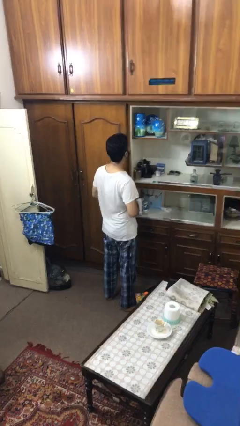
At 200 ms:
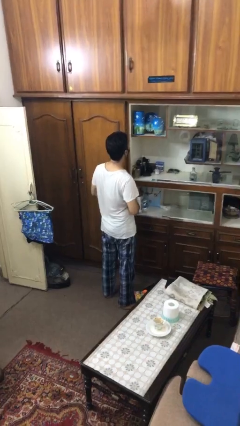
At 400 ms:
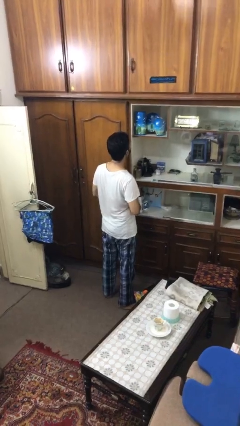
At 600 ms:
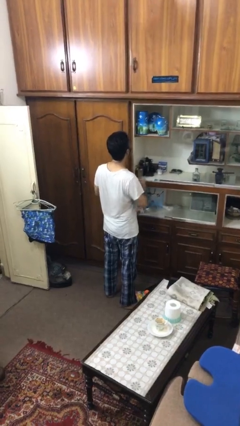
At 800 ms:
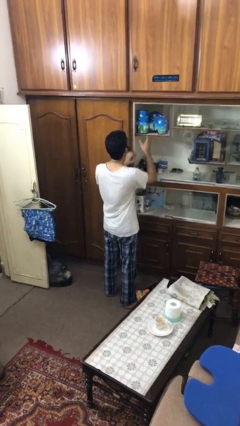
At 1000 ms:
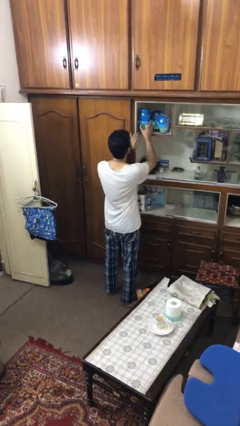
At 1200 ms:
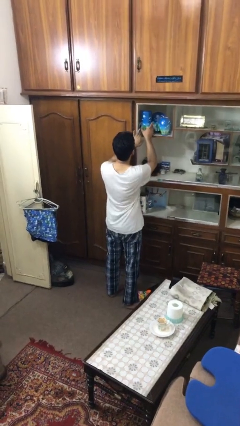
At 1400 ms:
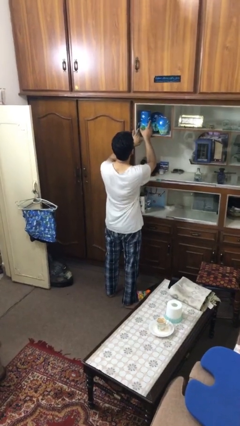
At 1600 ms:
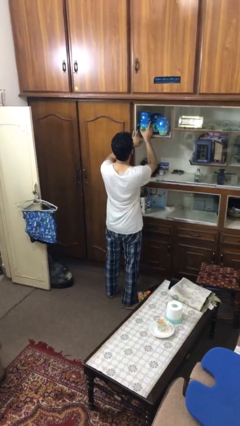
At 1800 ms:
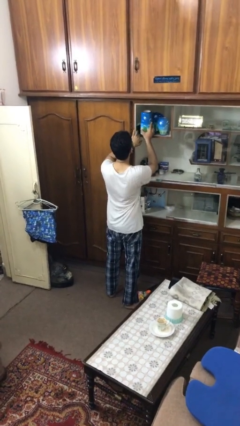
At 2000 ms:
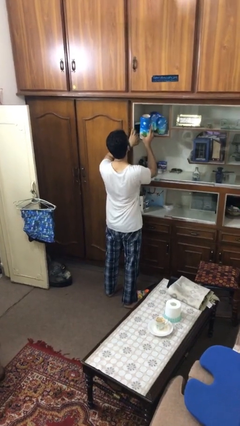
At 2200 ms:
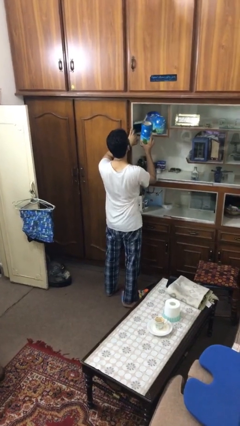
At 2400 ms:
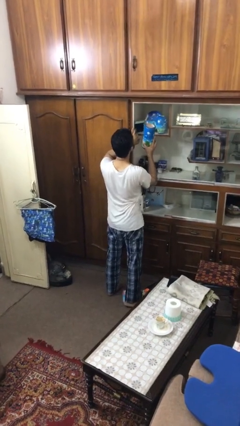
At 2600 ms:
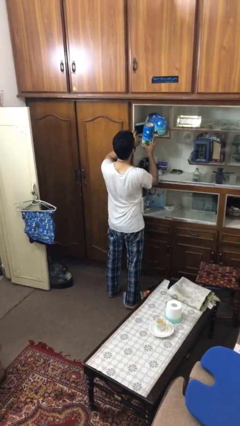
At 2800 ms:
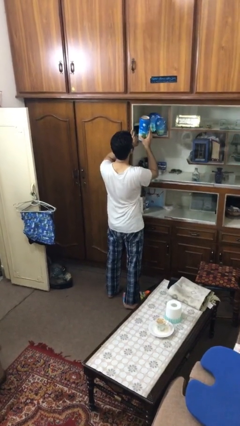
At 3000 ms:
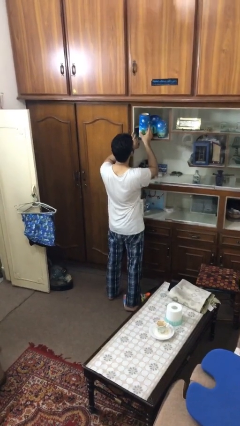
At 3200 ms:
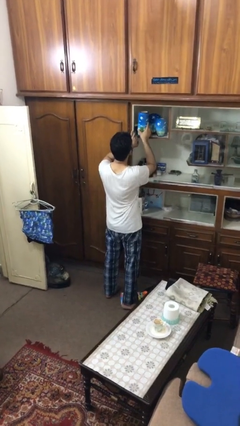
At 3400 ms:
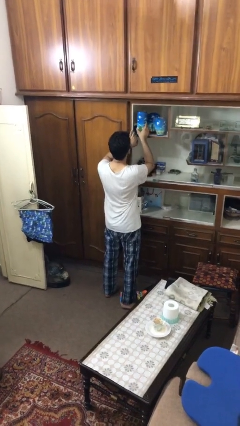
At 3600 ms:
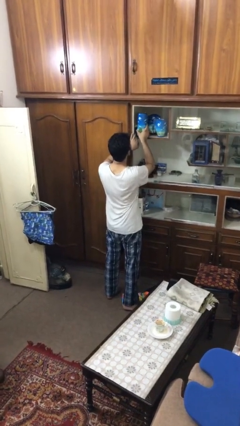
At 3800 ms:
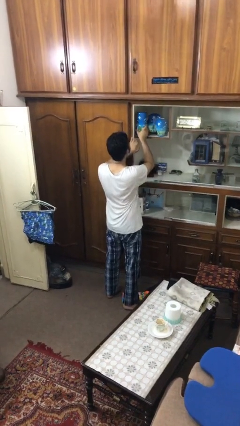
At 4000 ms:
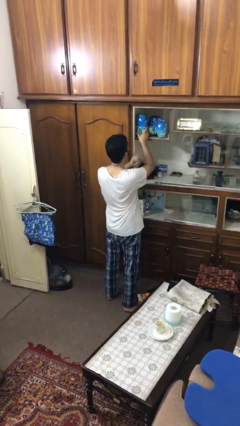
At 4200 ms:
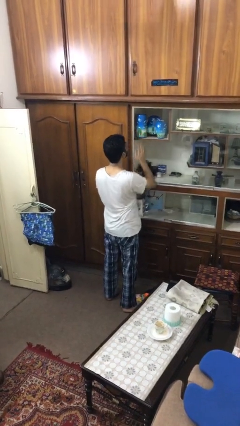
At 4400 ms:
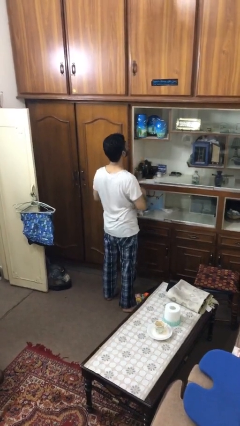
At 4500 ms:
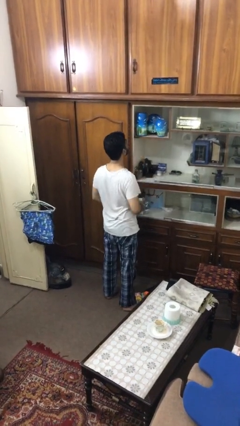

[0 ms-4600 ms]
person searches in cabinet

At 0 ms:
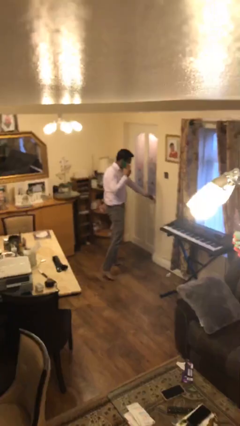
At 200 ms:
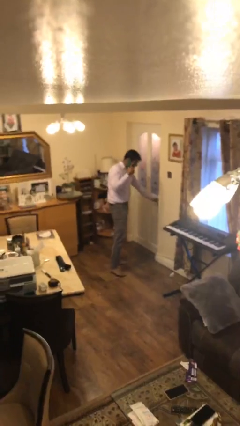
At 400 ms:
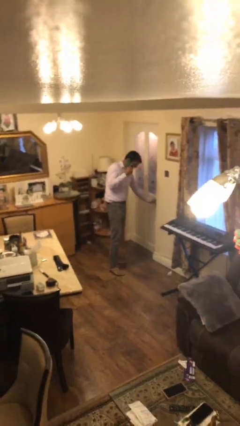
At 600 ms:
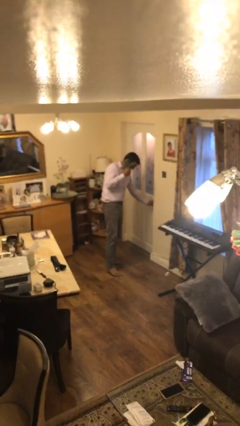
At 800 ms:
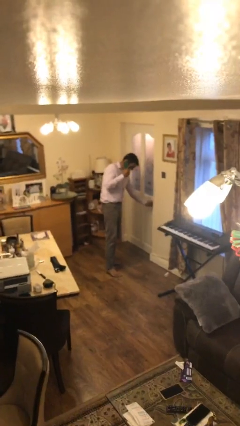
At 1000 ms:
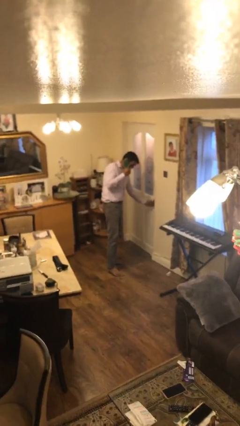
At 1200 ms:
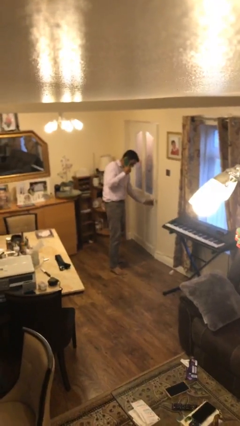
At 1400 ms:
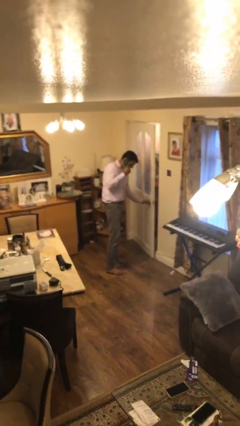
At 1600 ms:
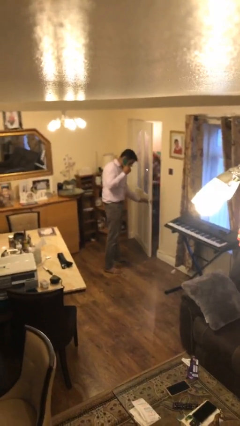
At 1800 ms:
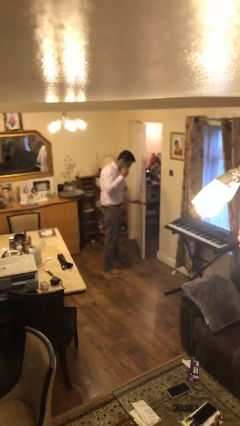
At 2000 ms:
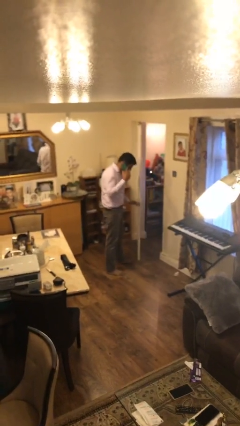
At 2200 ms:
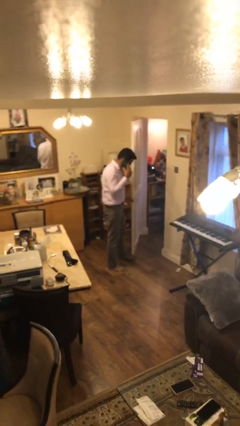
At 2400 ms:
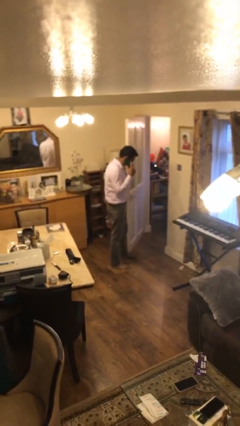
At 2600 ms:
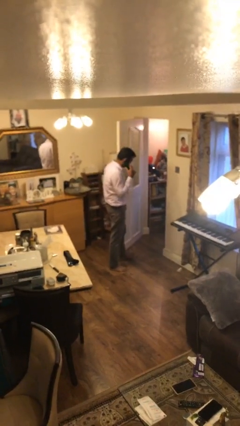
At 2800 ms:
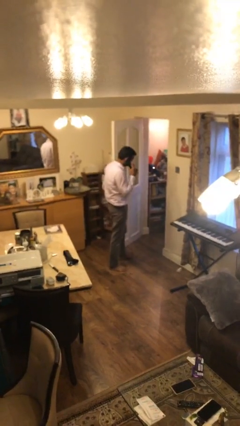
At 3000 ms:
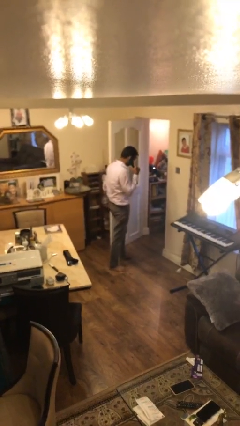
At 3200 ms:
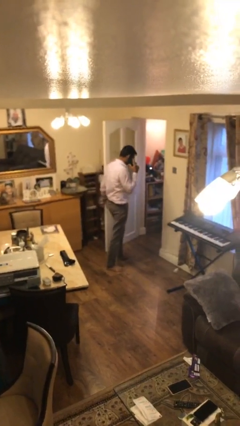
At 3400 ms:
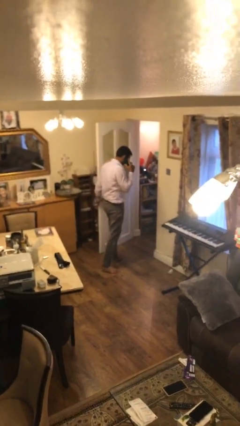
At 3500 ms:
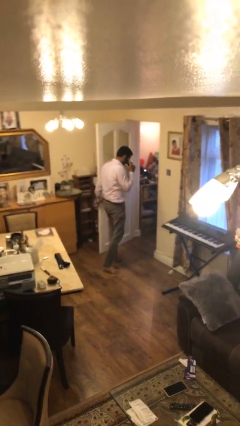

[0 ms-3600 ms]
person opens facility door

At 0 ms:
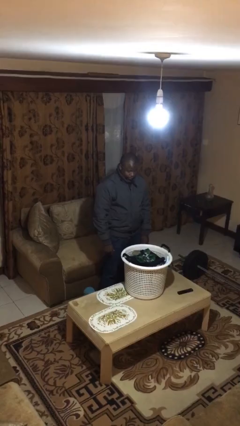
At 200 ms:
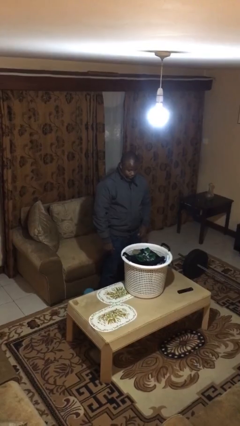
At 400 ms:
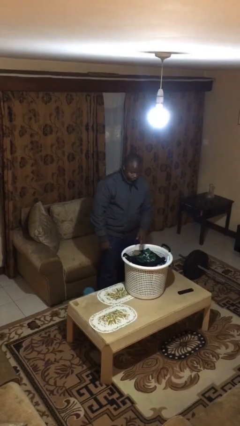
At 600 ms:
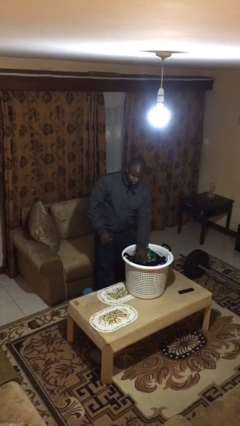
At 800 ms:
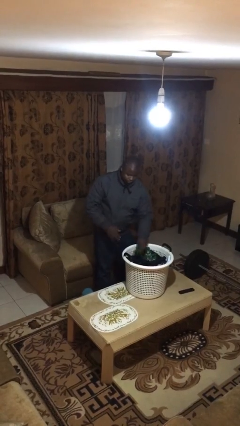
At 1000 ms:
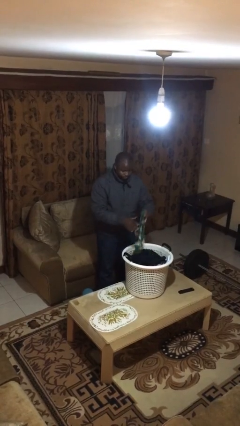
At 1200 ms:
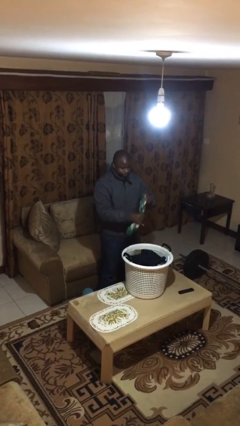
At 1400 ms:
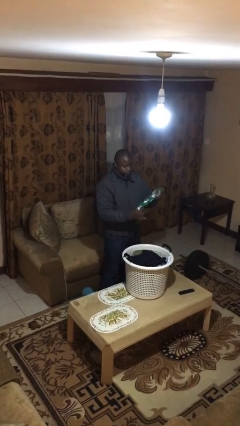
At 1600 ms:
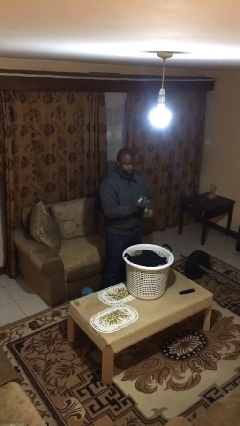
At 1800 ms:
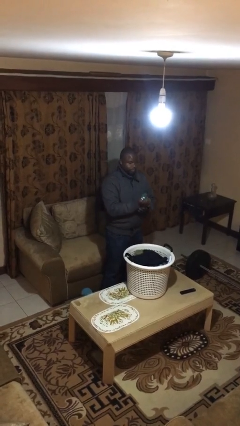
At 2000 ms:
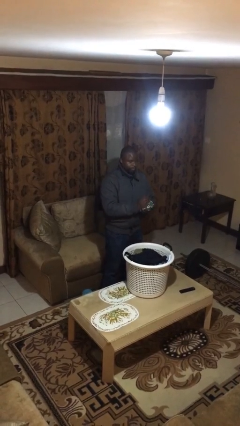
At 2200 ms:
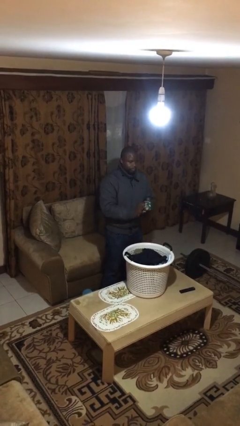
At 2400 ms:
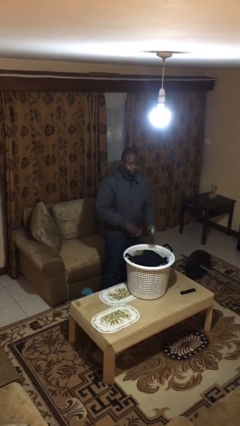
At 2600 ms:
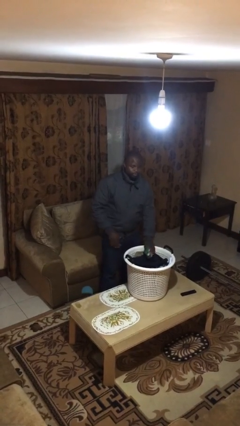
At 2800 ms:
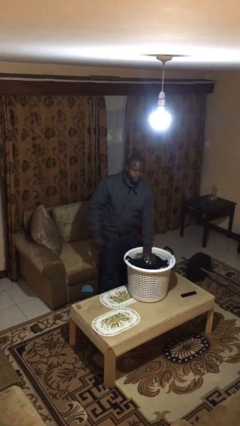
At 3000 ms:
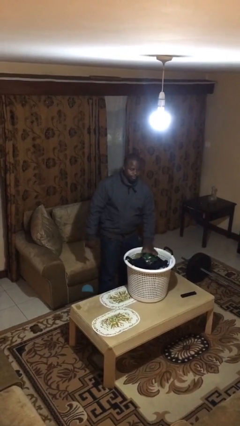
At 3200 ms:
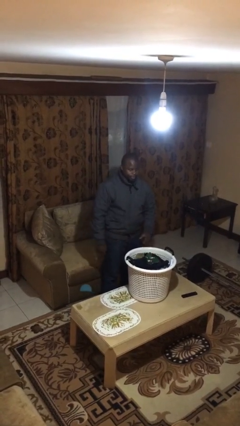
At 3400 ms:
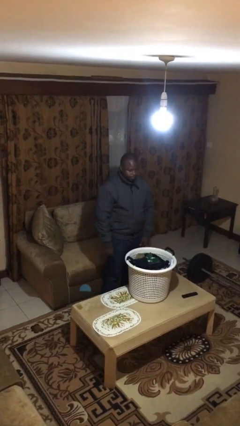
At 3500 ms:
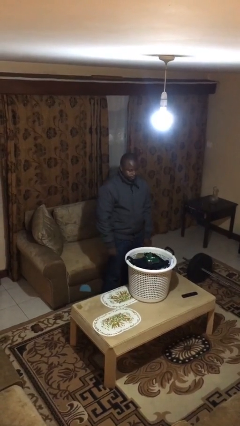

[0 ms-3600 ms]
person folds socks

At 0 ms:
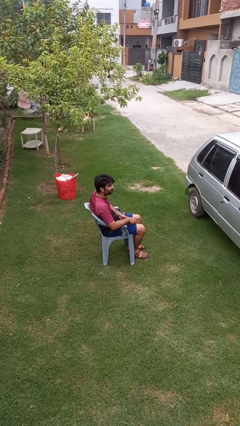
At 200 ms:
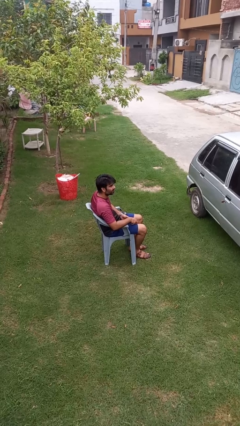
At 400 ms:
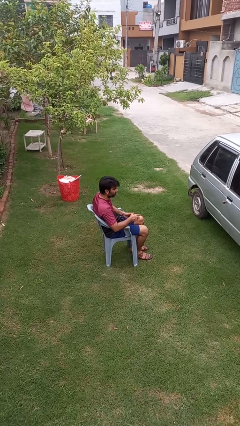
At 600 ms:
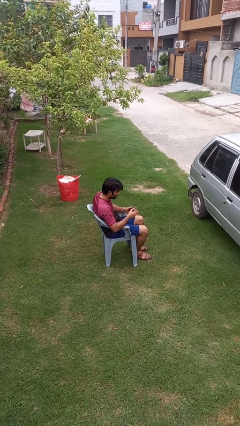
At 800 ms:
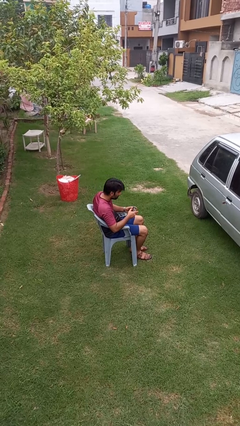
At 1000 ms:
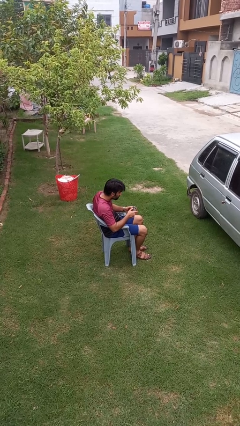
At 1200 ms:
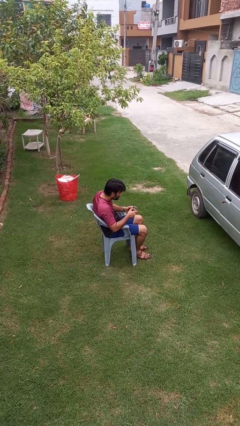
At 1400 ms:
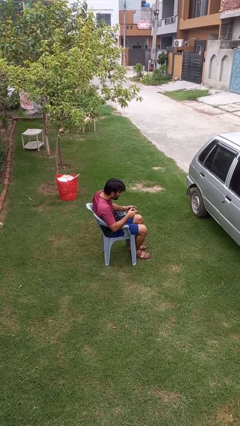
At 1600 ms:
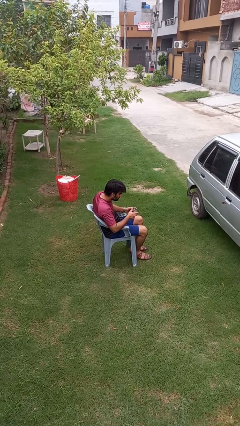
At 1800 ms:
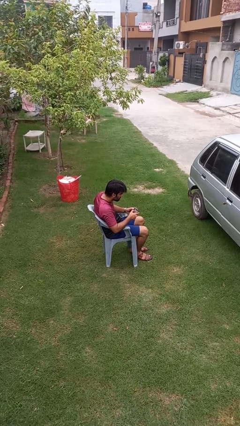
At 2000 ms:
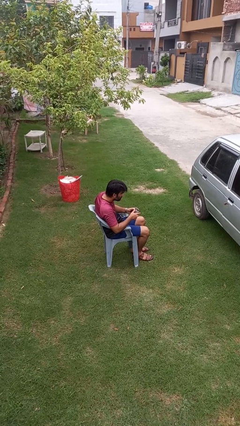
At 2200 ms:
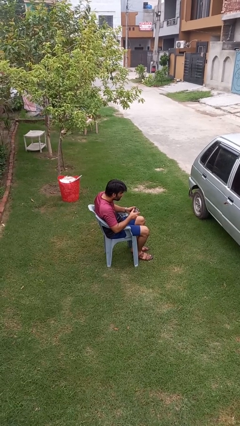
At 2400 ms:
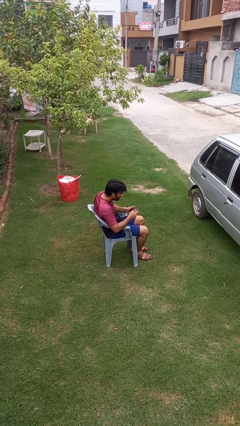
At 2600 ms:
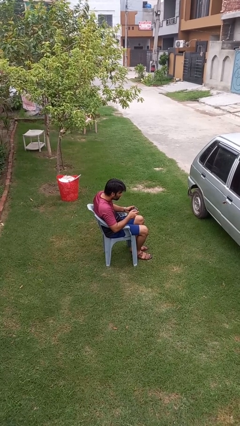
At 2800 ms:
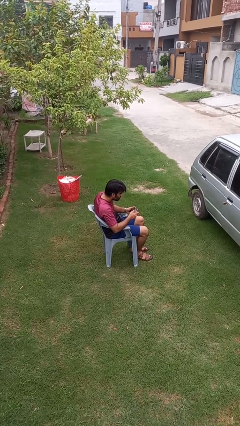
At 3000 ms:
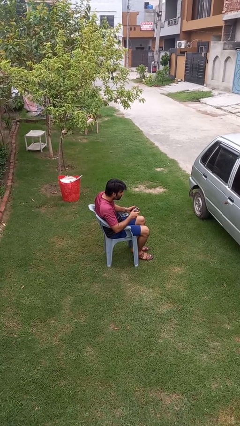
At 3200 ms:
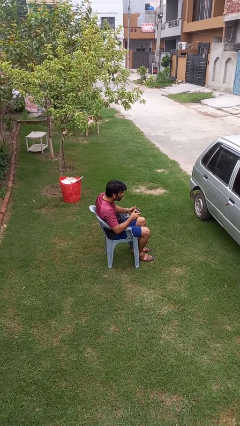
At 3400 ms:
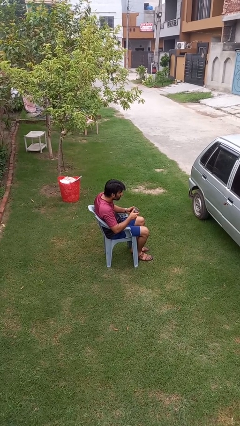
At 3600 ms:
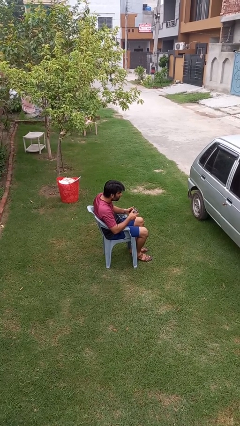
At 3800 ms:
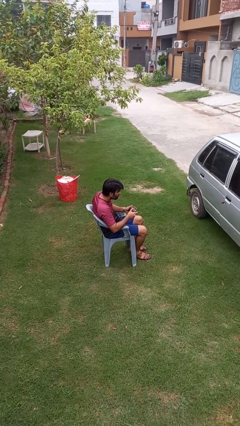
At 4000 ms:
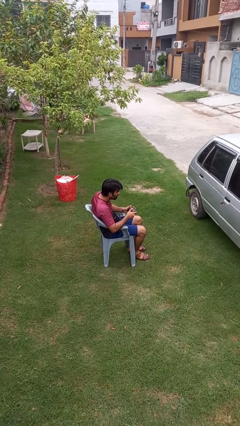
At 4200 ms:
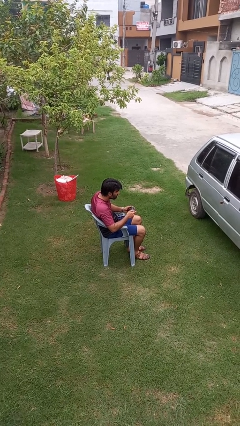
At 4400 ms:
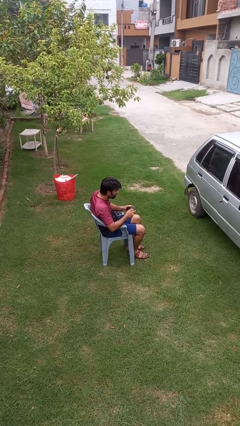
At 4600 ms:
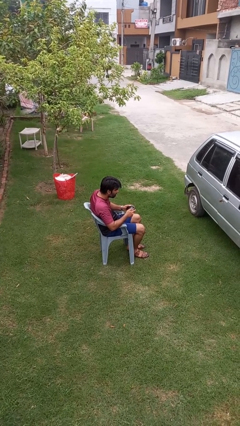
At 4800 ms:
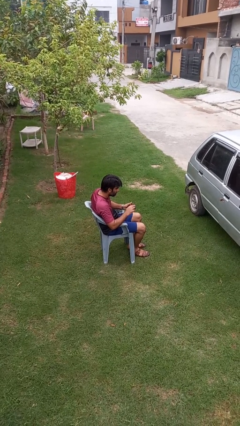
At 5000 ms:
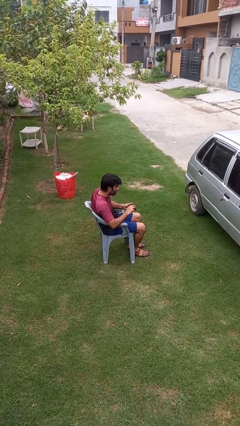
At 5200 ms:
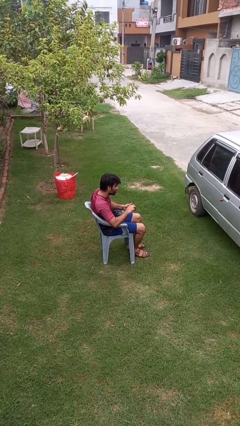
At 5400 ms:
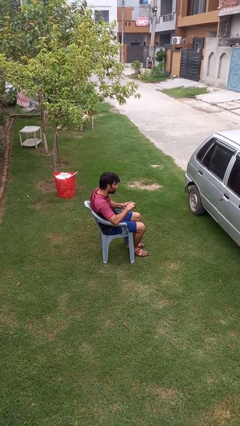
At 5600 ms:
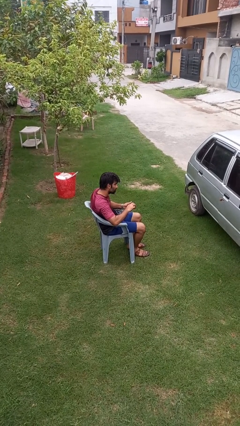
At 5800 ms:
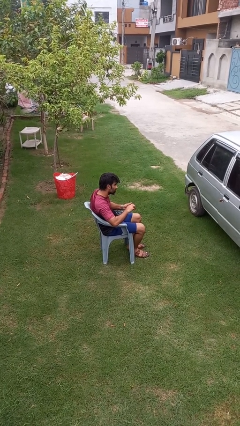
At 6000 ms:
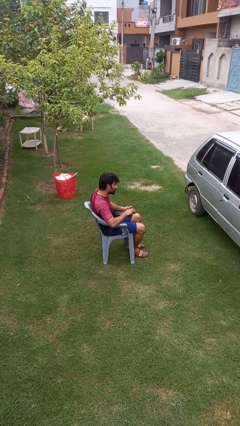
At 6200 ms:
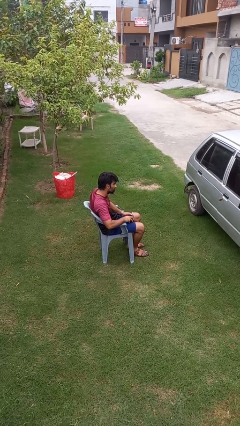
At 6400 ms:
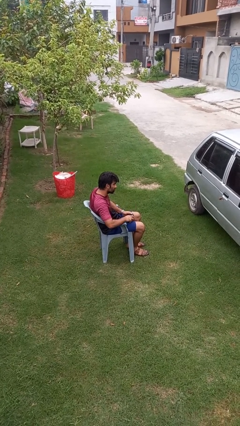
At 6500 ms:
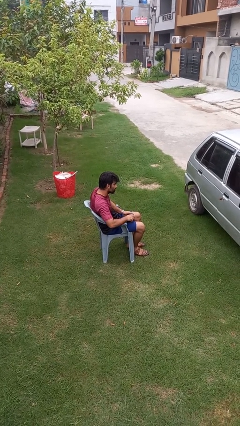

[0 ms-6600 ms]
person interacts with handheld game
